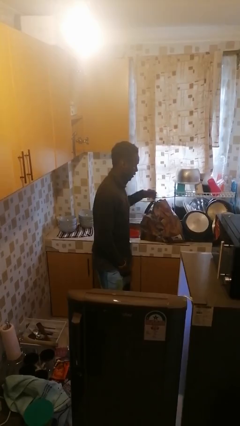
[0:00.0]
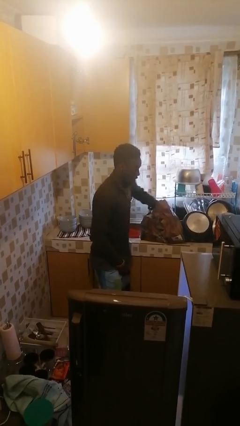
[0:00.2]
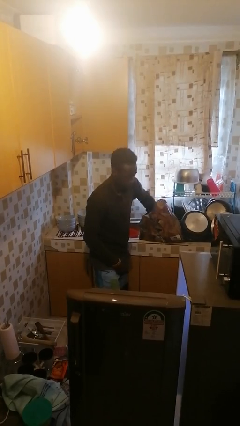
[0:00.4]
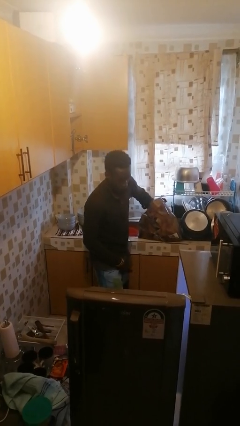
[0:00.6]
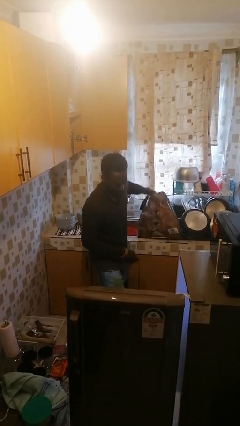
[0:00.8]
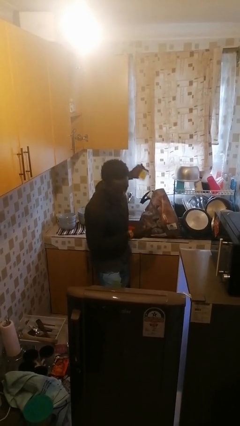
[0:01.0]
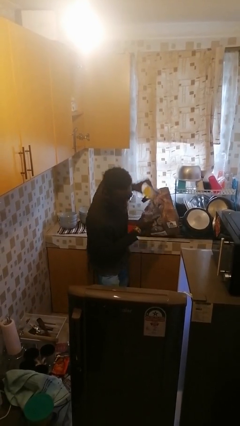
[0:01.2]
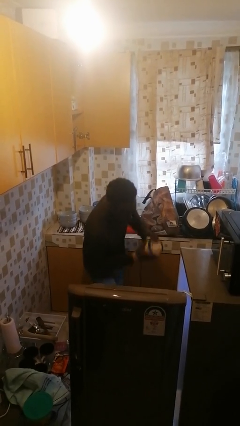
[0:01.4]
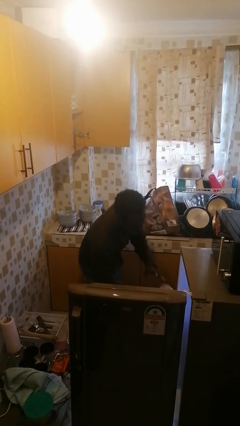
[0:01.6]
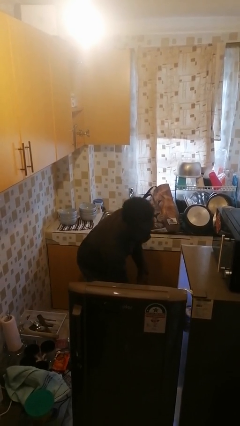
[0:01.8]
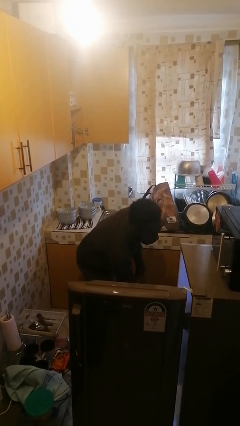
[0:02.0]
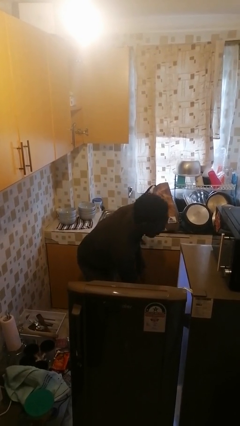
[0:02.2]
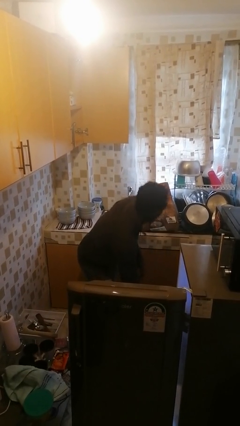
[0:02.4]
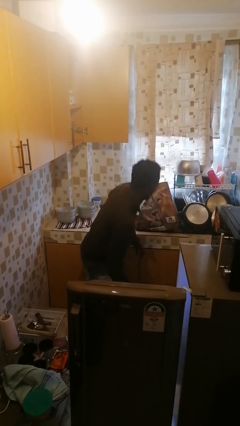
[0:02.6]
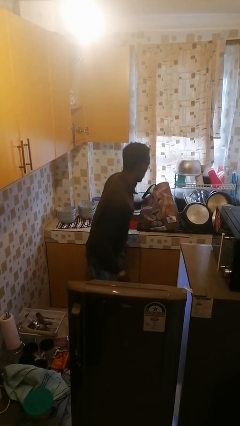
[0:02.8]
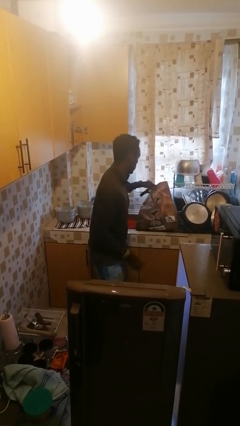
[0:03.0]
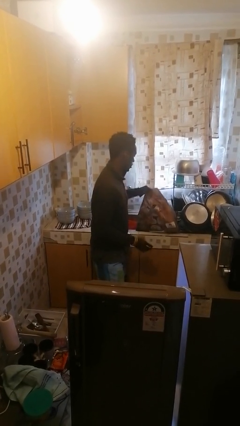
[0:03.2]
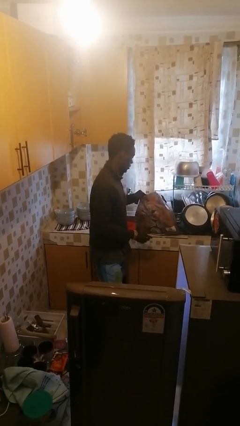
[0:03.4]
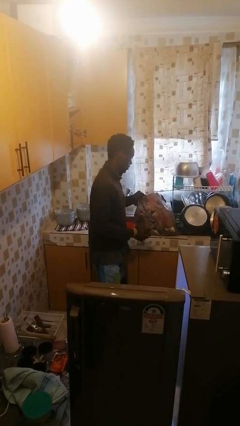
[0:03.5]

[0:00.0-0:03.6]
person loads groceries into refrigerator

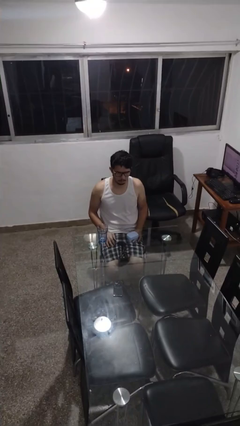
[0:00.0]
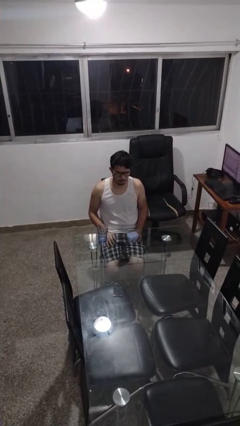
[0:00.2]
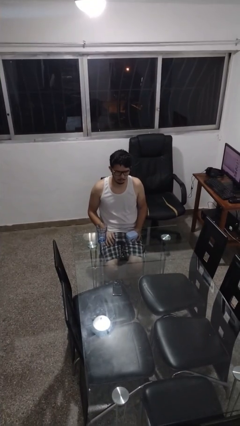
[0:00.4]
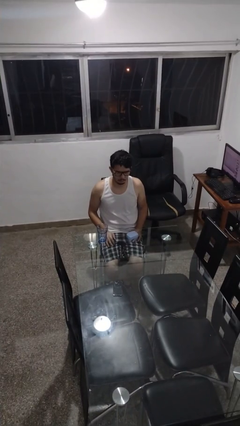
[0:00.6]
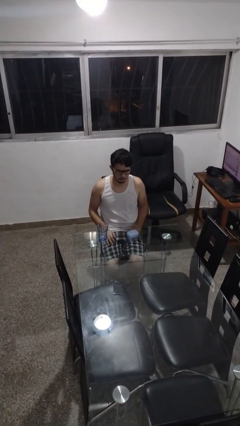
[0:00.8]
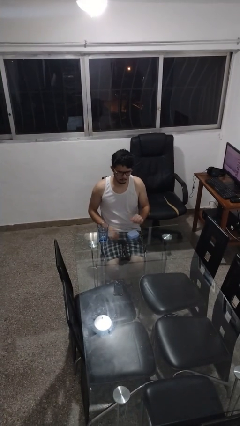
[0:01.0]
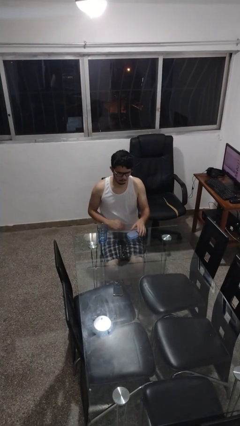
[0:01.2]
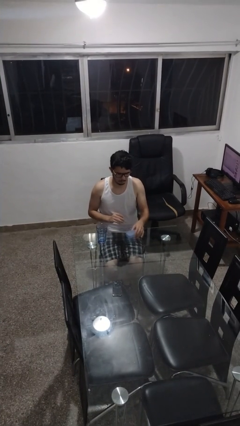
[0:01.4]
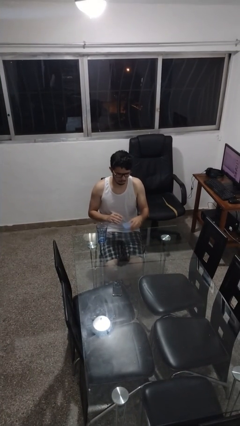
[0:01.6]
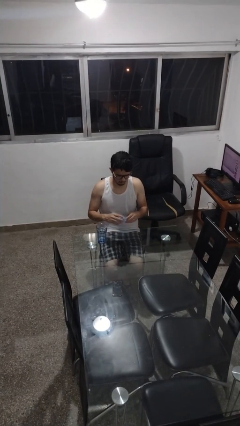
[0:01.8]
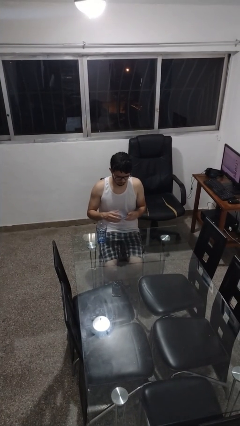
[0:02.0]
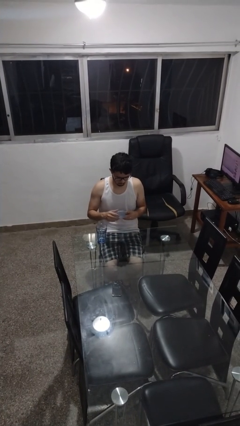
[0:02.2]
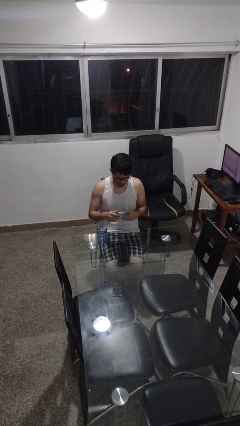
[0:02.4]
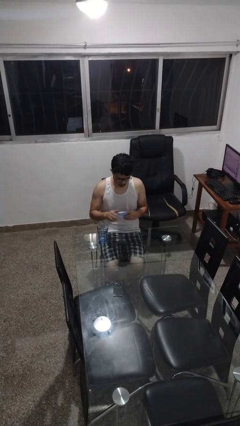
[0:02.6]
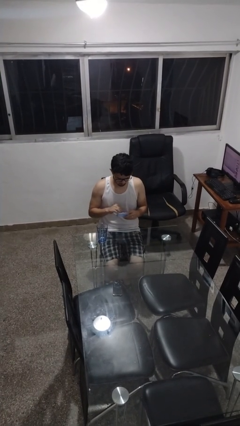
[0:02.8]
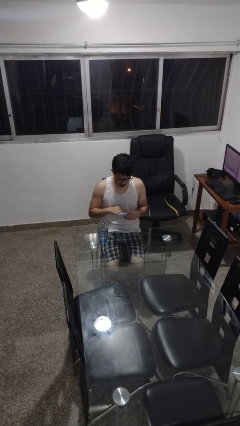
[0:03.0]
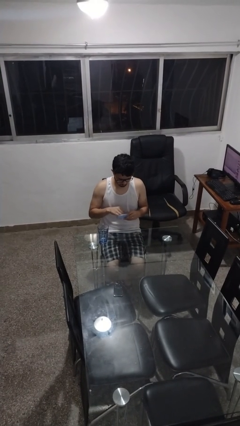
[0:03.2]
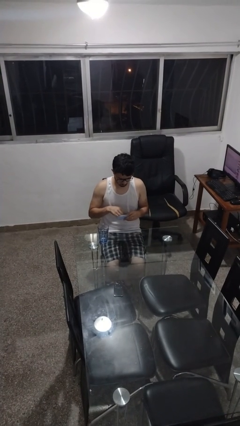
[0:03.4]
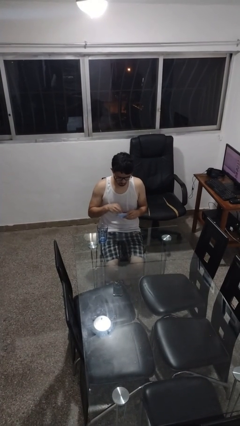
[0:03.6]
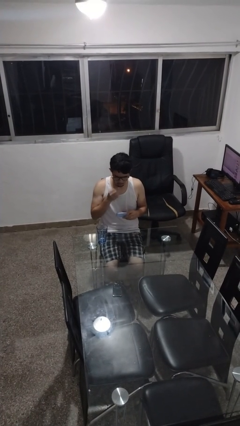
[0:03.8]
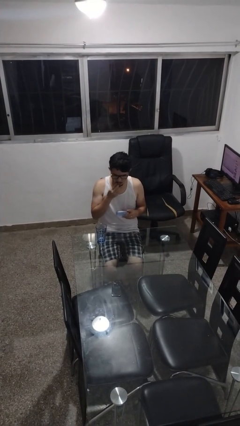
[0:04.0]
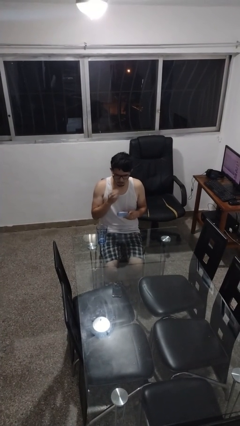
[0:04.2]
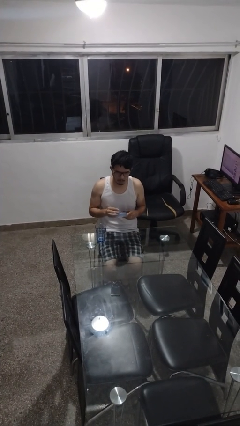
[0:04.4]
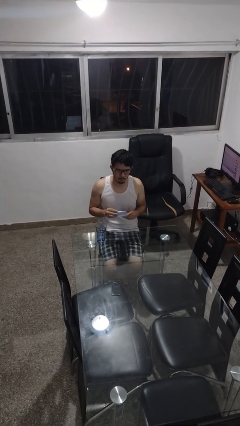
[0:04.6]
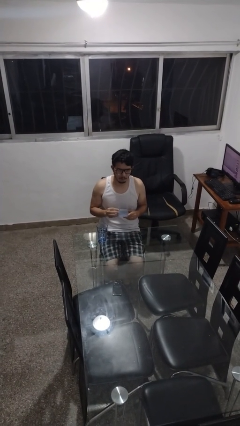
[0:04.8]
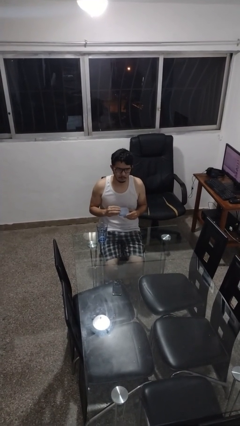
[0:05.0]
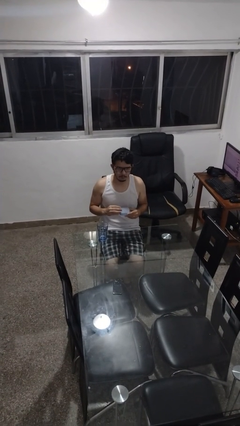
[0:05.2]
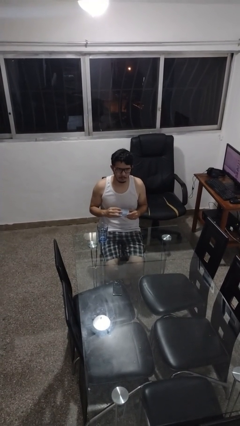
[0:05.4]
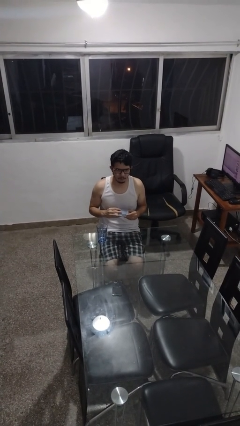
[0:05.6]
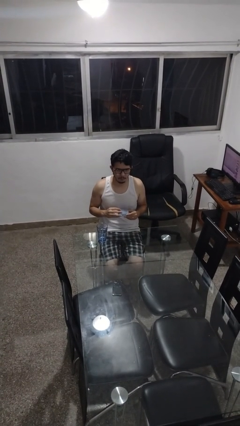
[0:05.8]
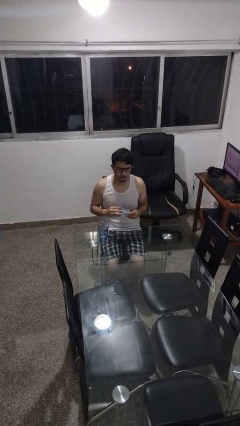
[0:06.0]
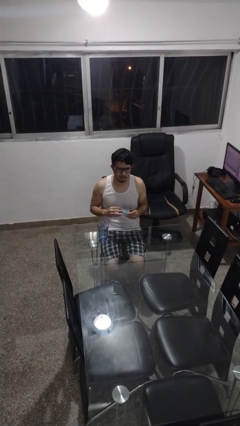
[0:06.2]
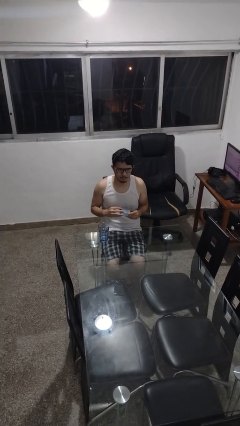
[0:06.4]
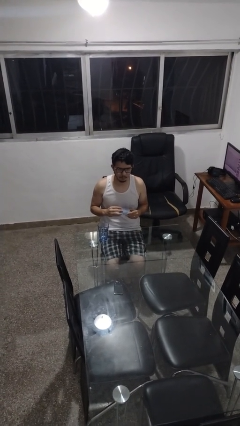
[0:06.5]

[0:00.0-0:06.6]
person takes medicine pills

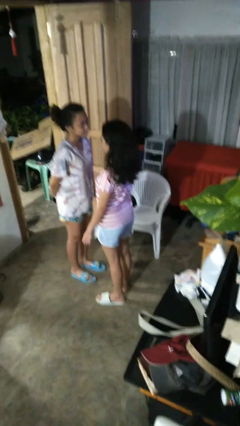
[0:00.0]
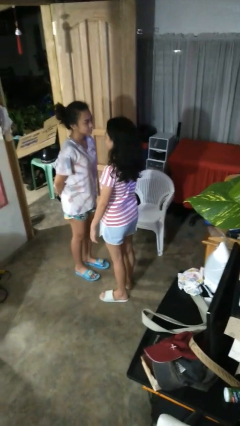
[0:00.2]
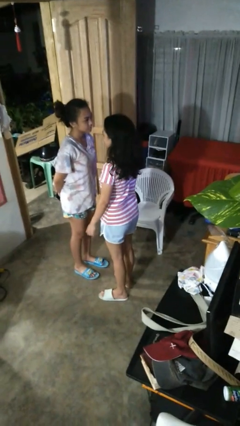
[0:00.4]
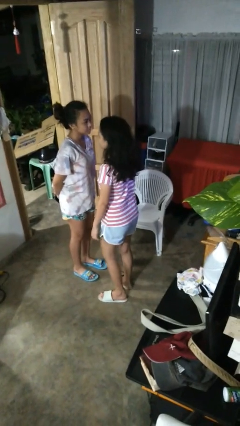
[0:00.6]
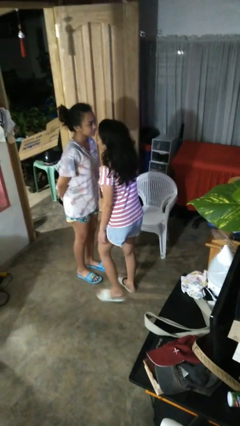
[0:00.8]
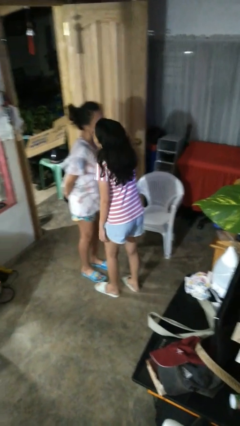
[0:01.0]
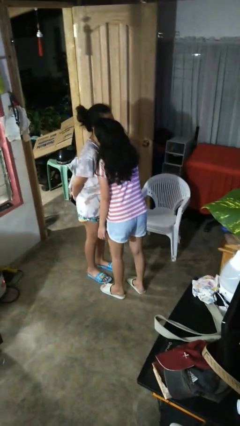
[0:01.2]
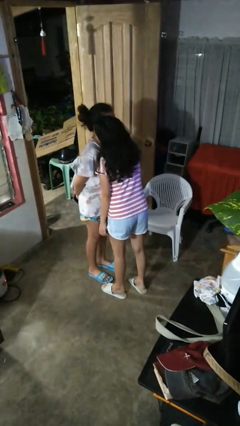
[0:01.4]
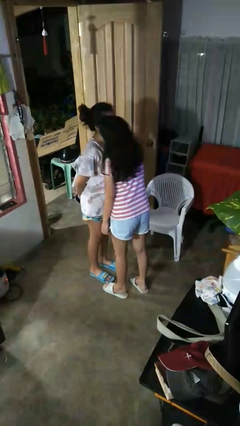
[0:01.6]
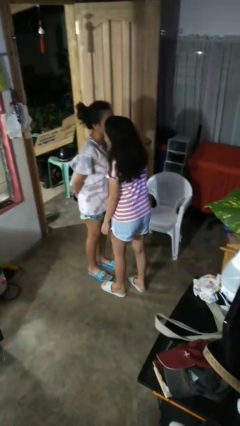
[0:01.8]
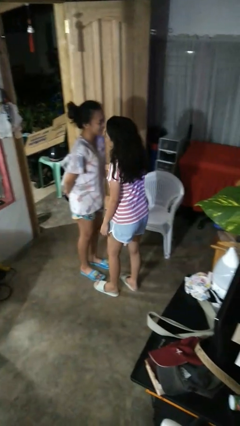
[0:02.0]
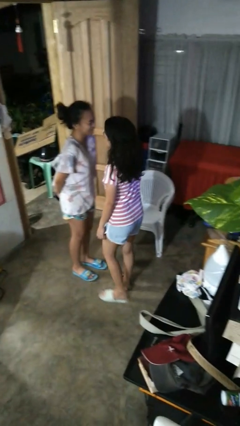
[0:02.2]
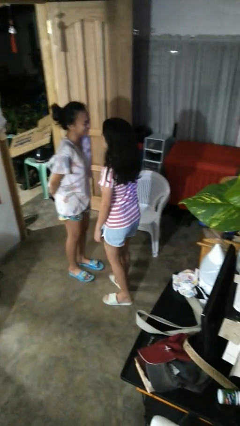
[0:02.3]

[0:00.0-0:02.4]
person kisses cheek of person

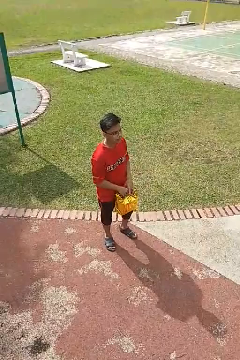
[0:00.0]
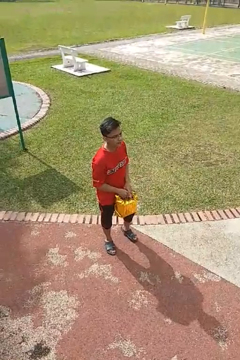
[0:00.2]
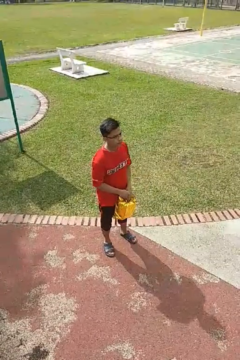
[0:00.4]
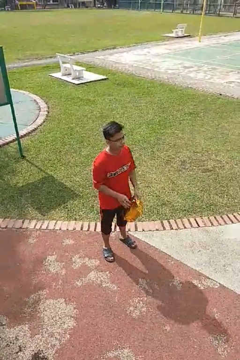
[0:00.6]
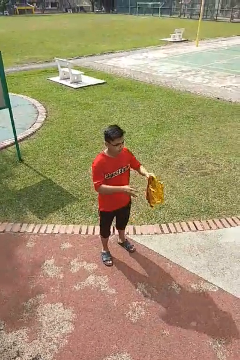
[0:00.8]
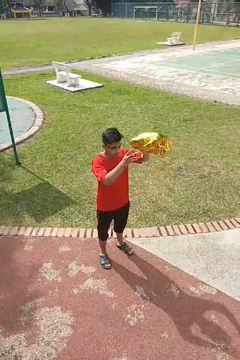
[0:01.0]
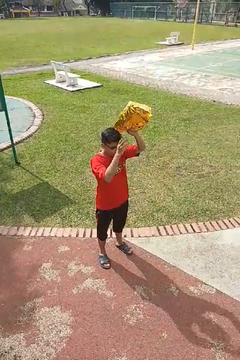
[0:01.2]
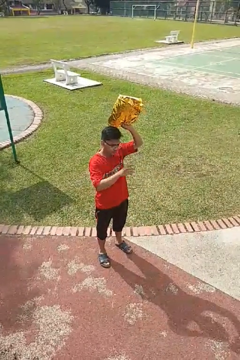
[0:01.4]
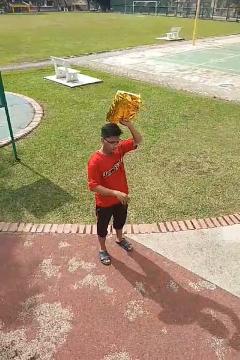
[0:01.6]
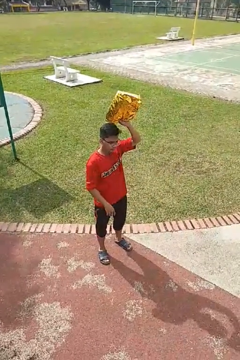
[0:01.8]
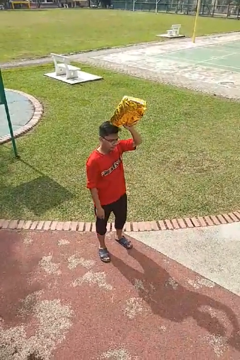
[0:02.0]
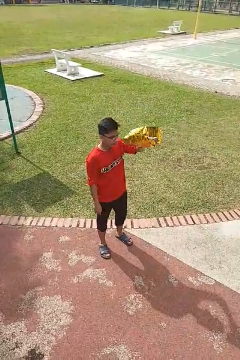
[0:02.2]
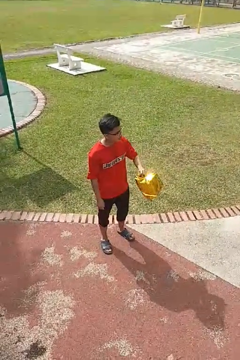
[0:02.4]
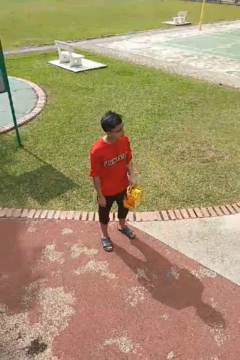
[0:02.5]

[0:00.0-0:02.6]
person holds object above head

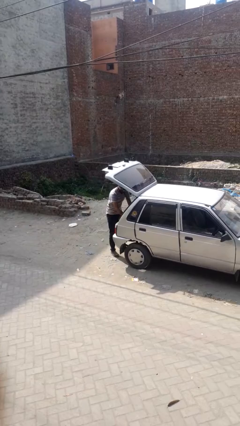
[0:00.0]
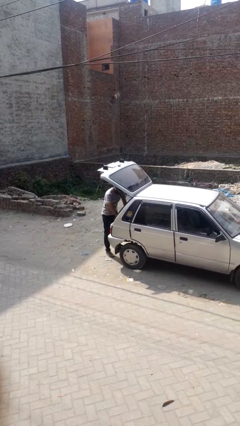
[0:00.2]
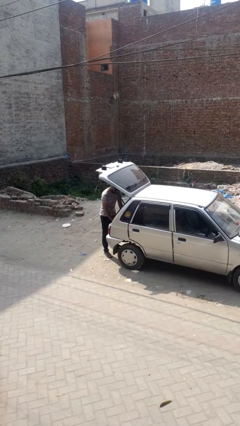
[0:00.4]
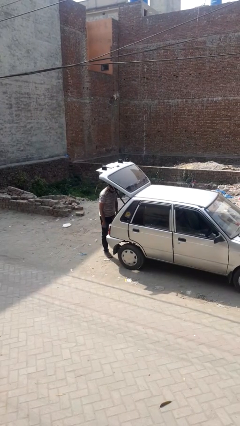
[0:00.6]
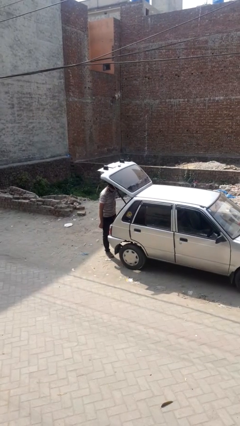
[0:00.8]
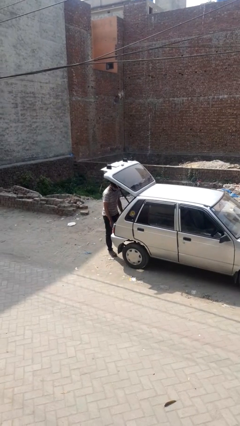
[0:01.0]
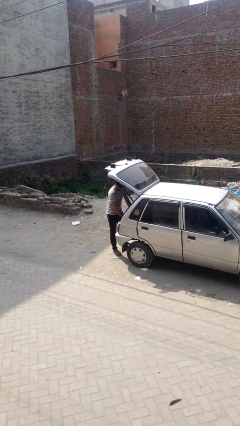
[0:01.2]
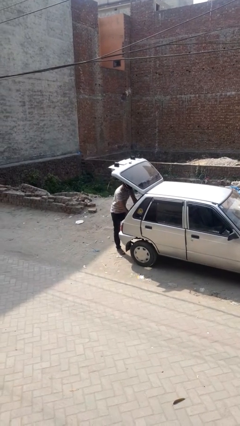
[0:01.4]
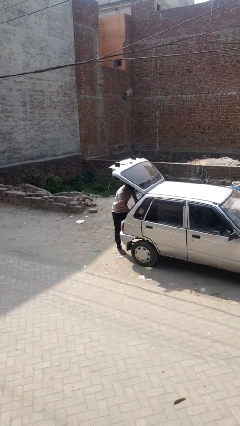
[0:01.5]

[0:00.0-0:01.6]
person loads car

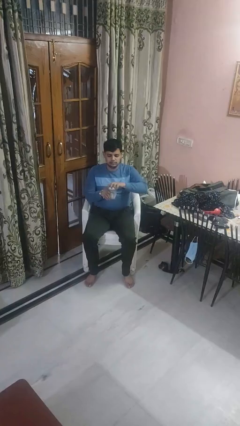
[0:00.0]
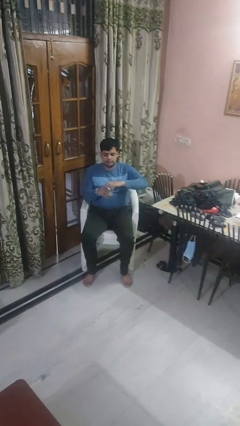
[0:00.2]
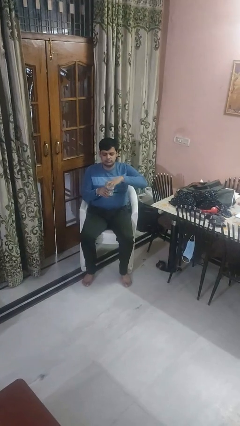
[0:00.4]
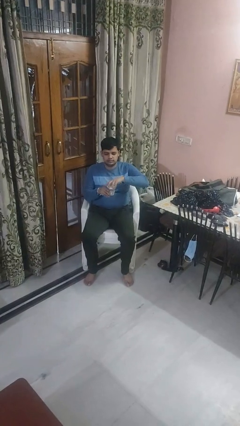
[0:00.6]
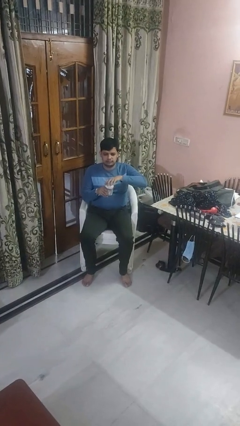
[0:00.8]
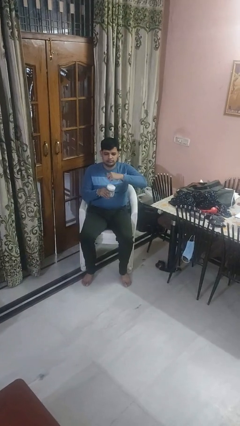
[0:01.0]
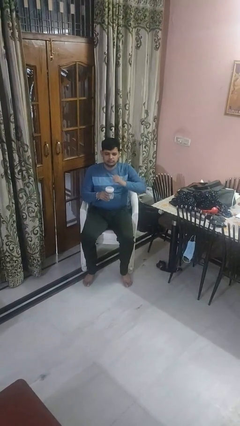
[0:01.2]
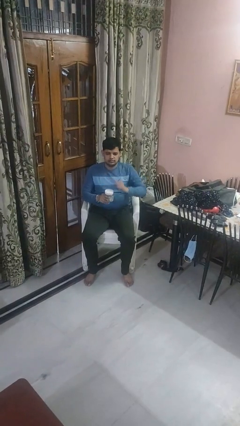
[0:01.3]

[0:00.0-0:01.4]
person closes jar
